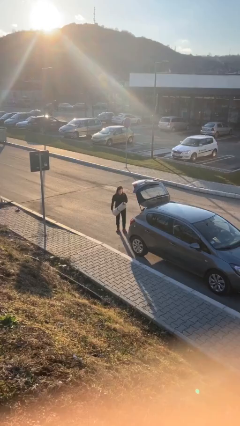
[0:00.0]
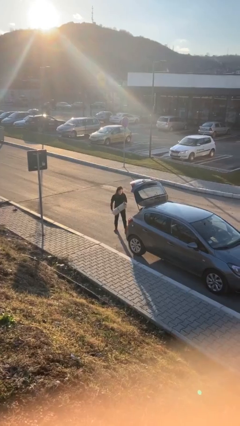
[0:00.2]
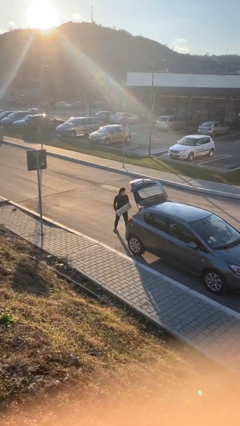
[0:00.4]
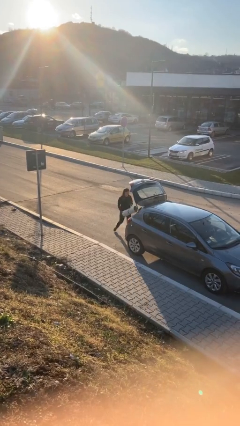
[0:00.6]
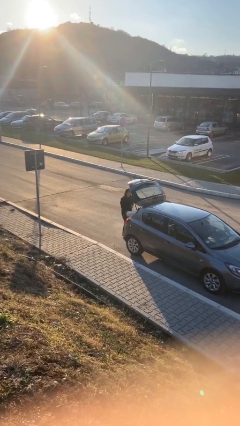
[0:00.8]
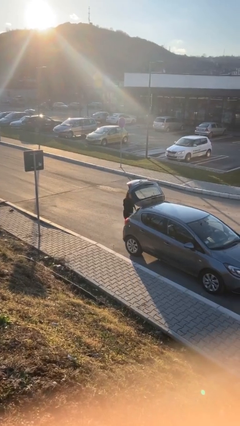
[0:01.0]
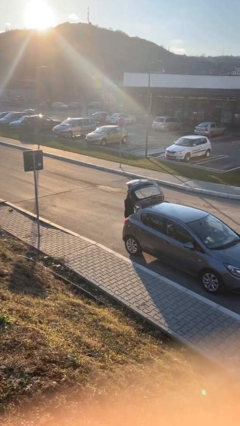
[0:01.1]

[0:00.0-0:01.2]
person loads car

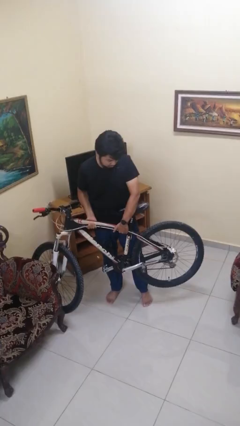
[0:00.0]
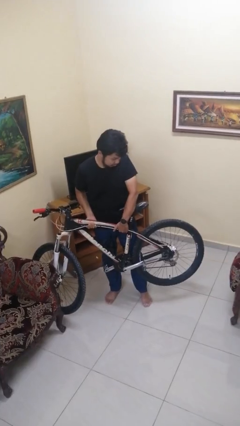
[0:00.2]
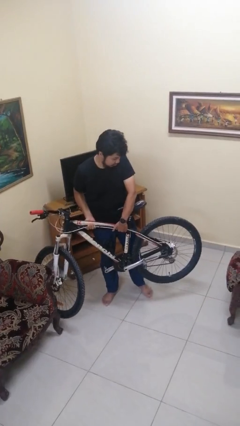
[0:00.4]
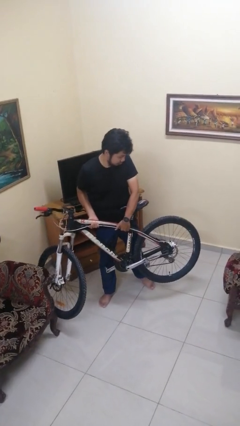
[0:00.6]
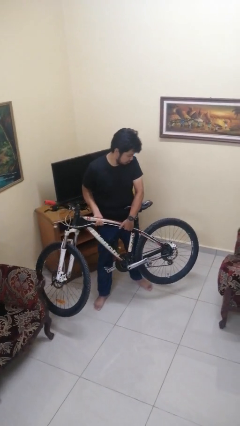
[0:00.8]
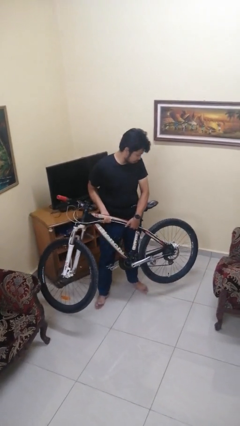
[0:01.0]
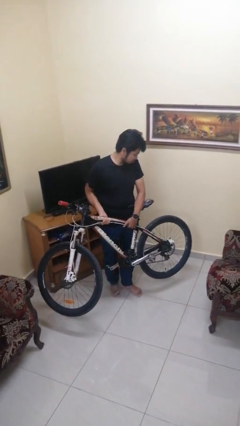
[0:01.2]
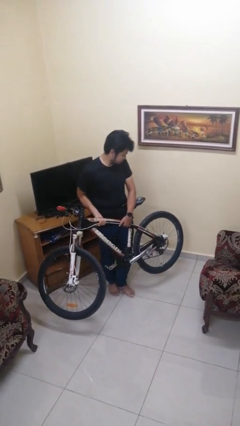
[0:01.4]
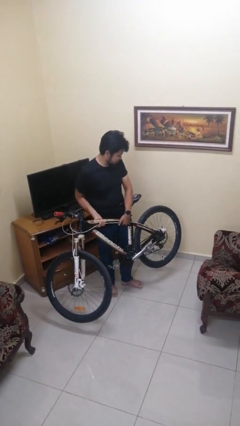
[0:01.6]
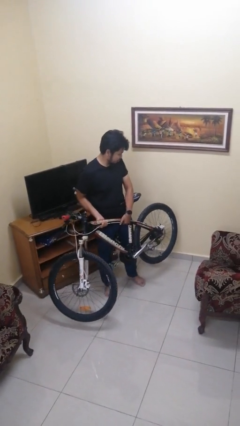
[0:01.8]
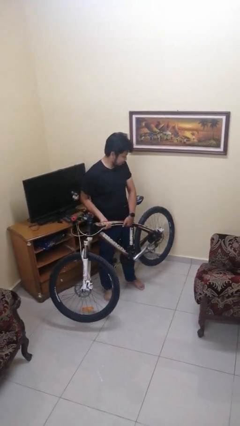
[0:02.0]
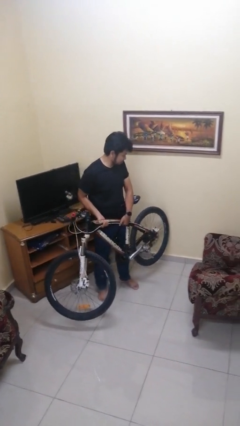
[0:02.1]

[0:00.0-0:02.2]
person carries bicycle

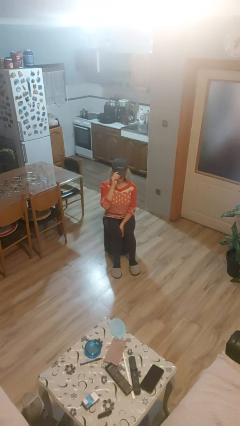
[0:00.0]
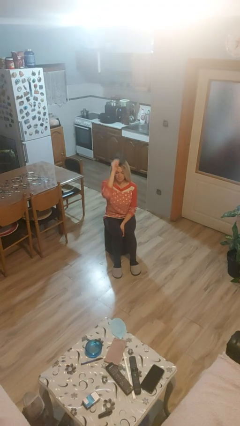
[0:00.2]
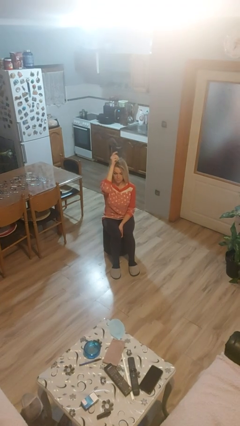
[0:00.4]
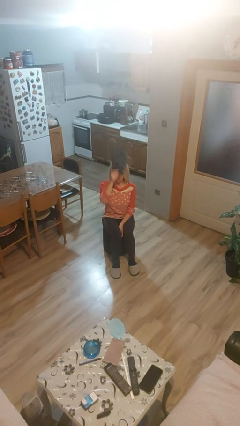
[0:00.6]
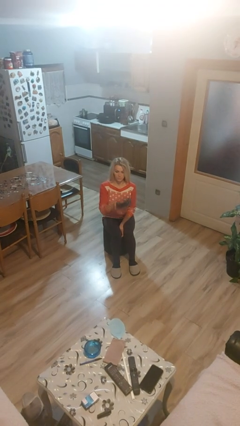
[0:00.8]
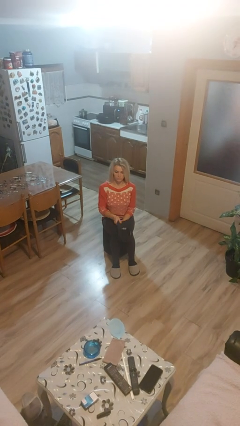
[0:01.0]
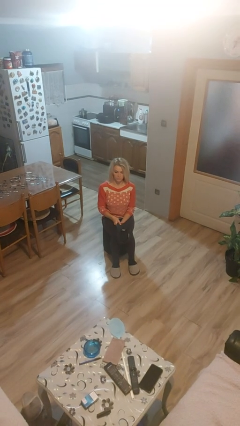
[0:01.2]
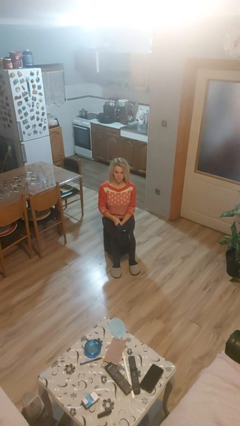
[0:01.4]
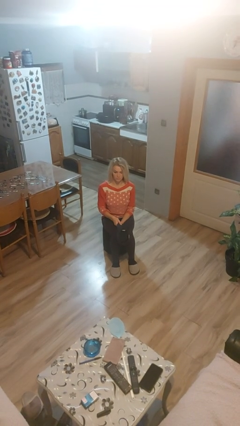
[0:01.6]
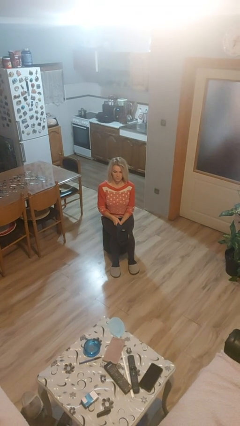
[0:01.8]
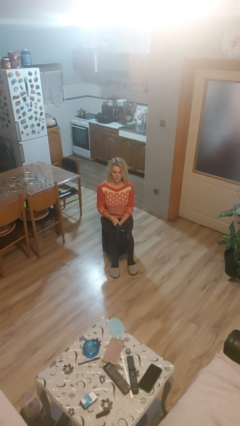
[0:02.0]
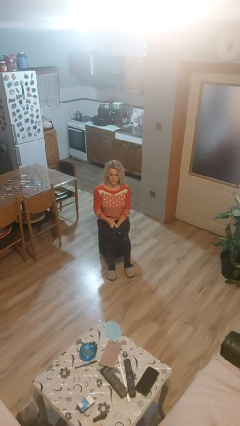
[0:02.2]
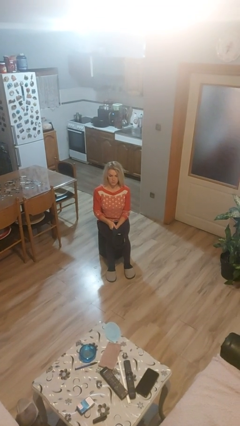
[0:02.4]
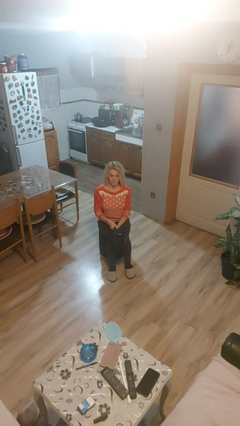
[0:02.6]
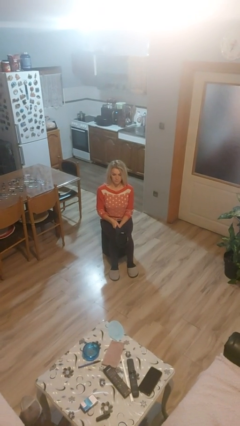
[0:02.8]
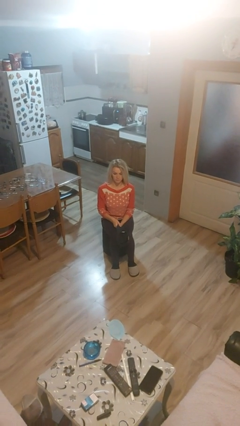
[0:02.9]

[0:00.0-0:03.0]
person takes off hat

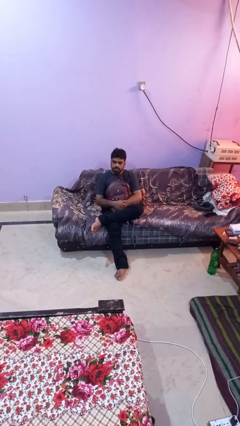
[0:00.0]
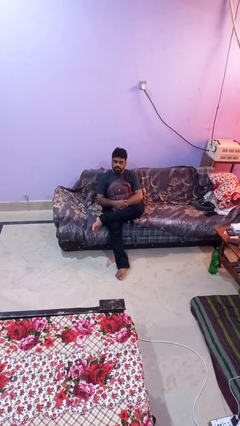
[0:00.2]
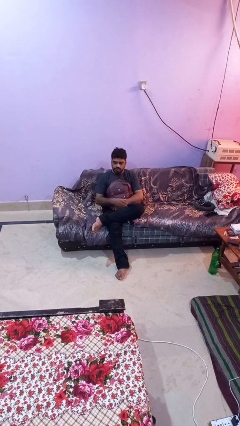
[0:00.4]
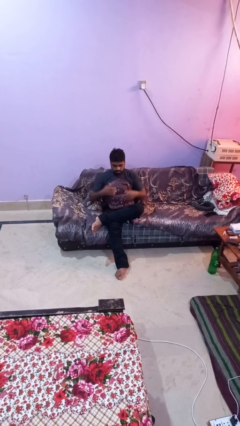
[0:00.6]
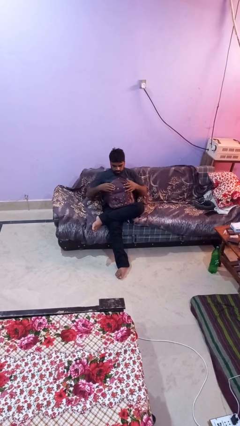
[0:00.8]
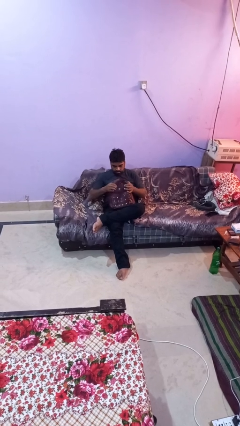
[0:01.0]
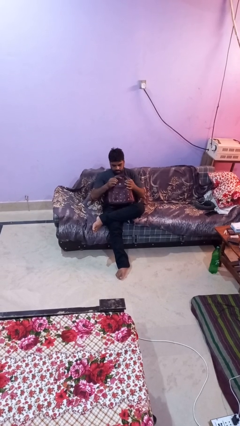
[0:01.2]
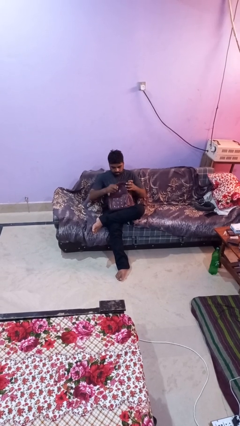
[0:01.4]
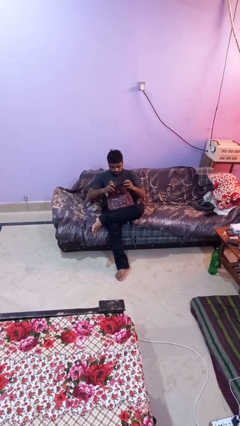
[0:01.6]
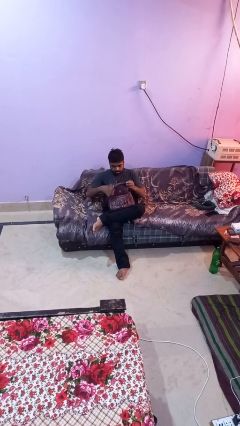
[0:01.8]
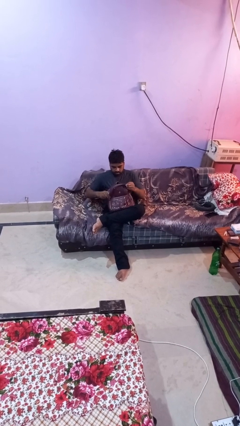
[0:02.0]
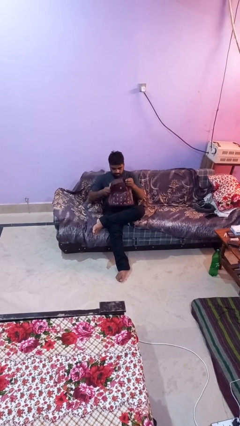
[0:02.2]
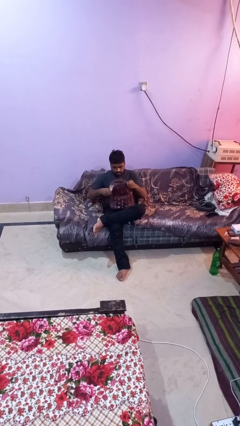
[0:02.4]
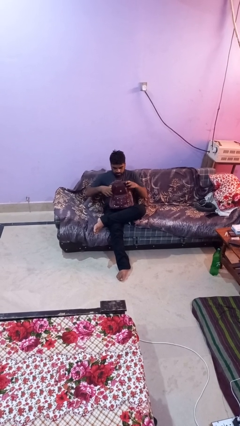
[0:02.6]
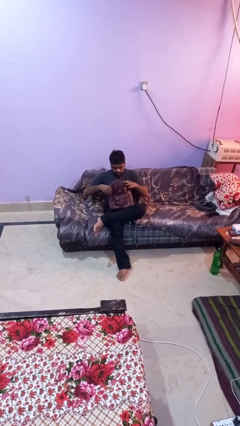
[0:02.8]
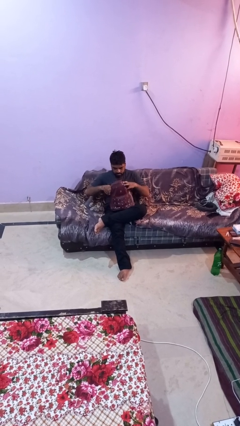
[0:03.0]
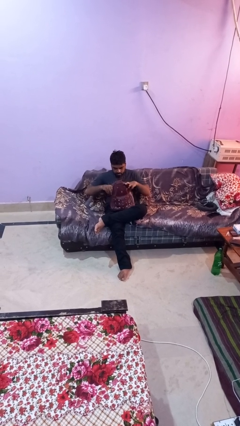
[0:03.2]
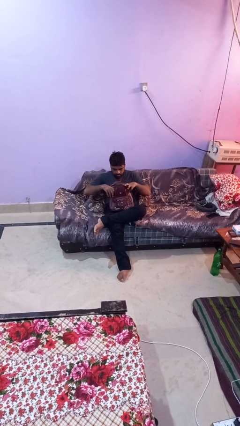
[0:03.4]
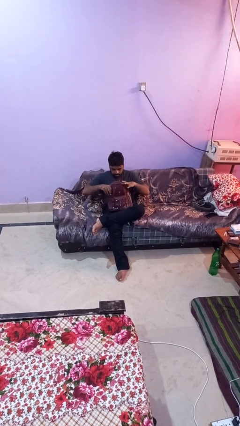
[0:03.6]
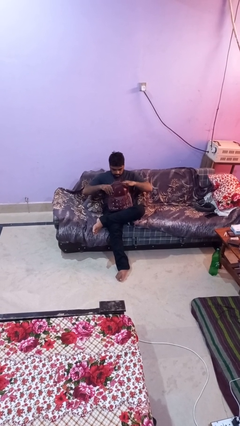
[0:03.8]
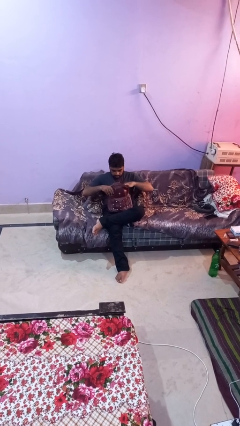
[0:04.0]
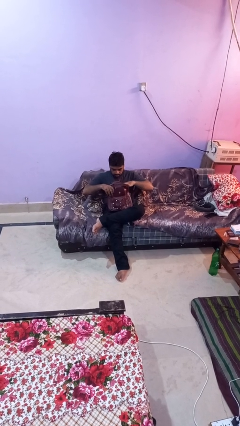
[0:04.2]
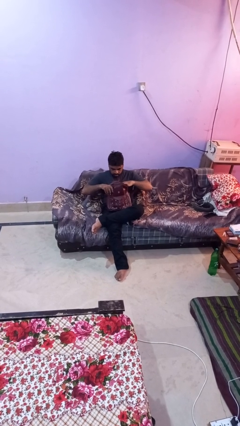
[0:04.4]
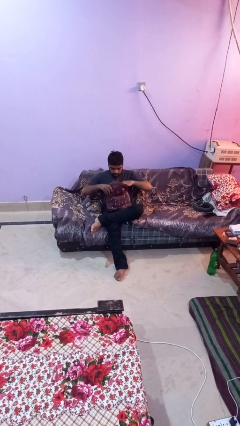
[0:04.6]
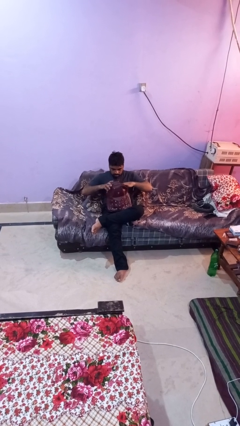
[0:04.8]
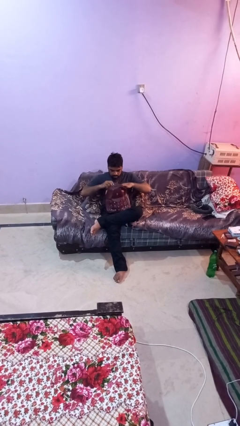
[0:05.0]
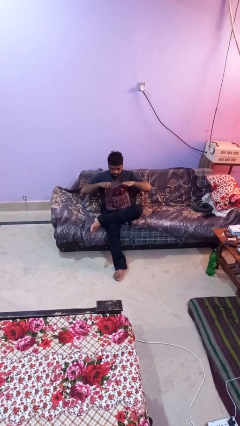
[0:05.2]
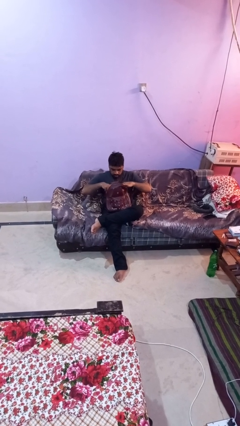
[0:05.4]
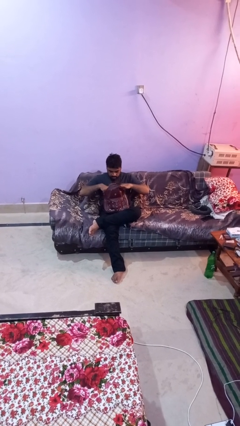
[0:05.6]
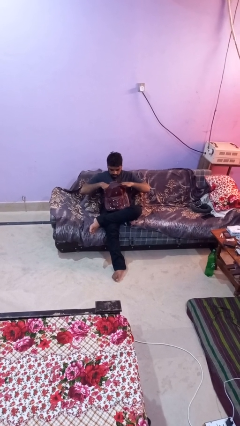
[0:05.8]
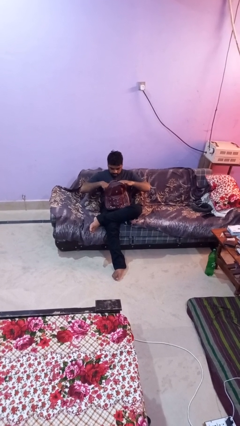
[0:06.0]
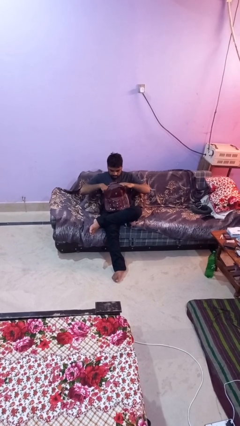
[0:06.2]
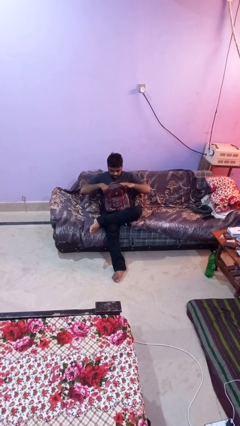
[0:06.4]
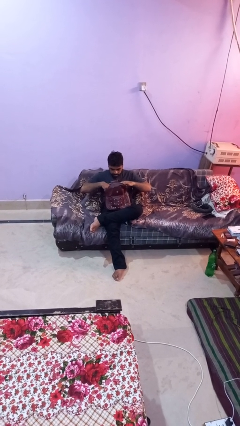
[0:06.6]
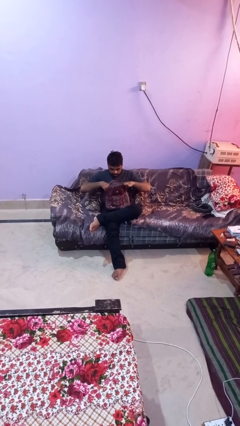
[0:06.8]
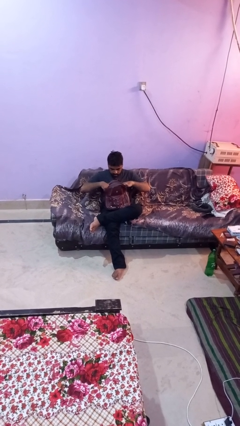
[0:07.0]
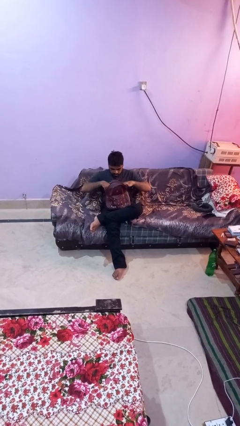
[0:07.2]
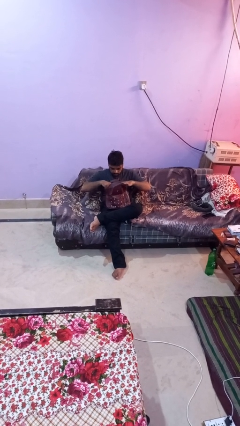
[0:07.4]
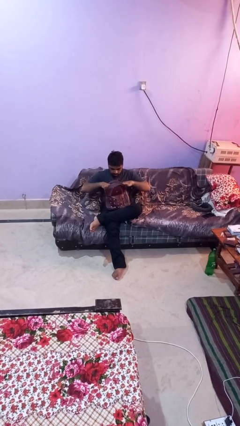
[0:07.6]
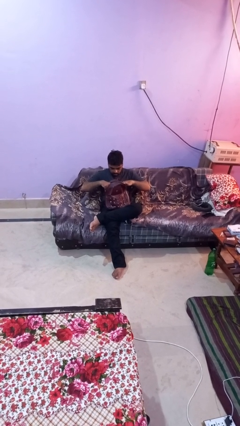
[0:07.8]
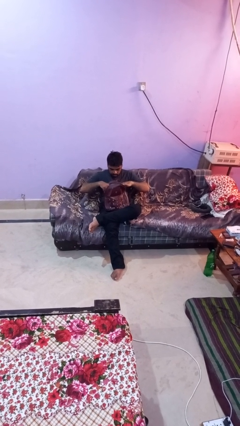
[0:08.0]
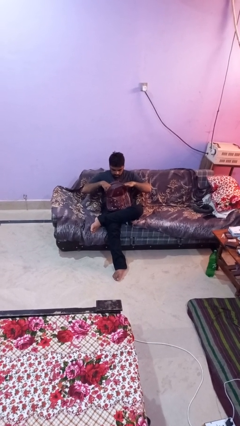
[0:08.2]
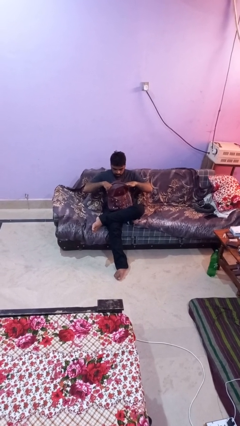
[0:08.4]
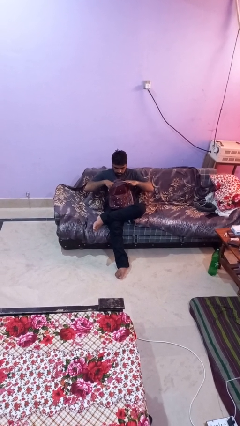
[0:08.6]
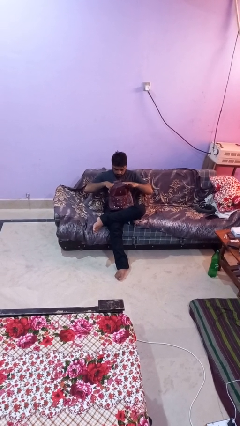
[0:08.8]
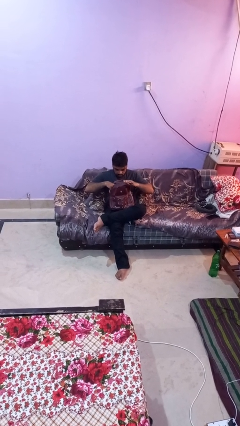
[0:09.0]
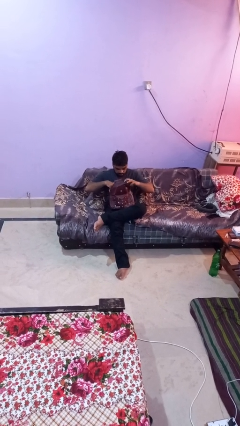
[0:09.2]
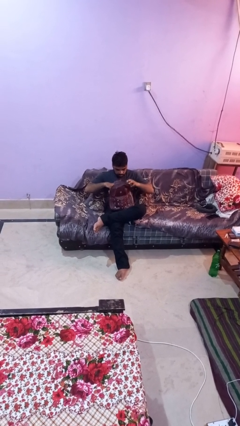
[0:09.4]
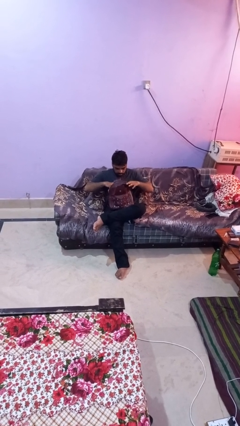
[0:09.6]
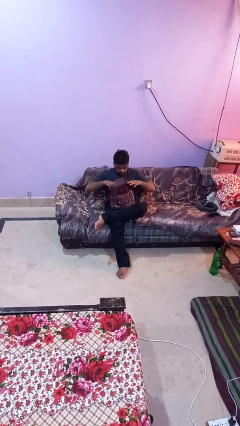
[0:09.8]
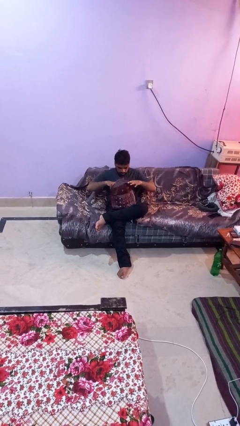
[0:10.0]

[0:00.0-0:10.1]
person searches in backpack

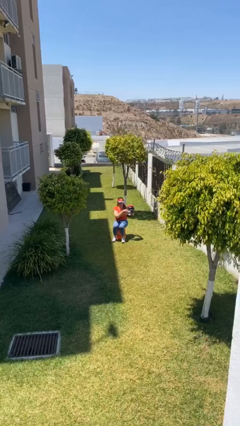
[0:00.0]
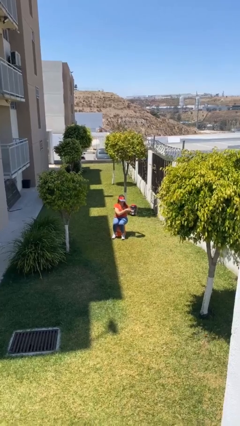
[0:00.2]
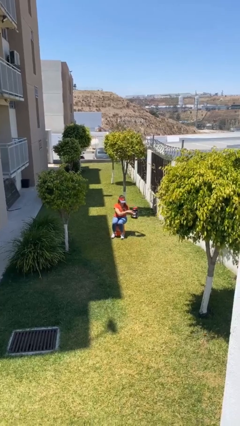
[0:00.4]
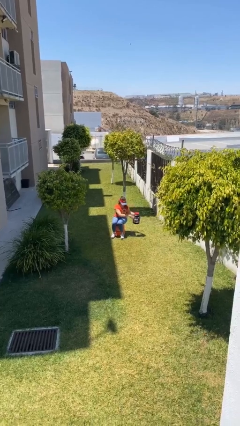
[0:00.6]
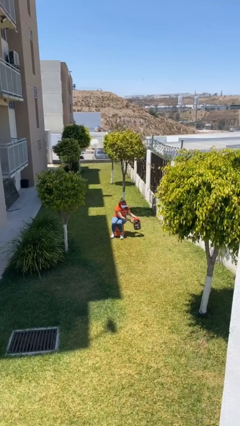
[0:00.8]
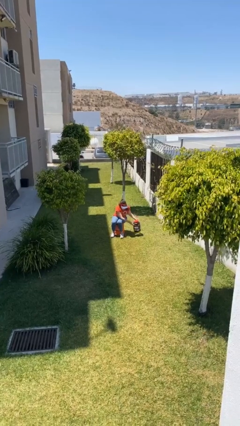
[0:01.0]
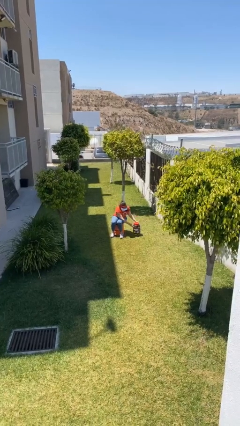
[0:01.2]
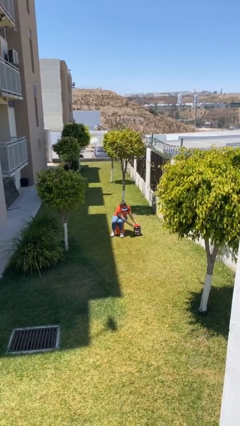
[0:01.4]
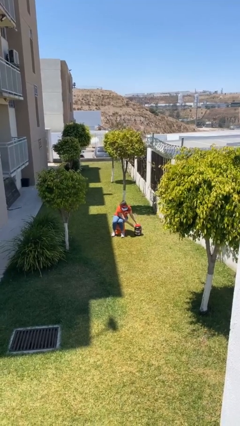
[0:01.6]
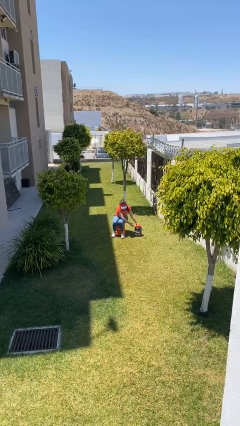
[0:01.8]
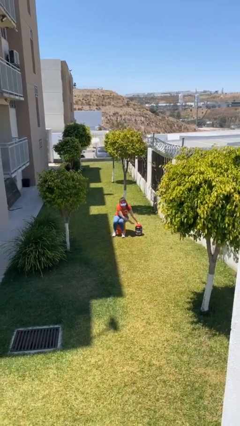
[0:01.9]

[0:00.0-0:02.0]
person puts down object on floor
